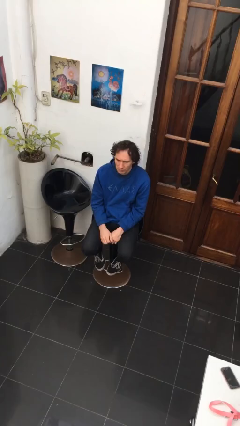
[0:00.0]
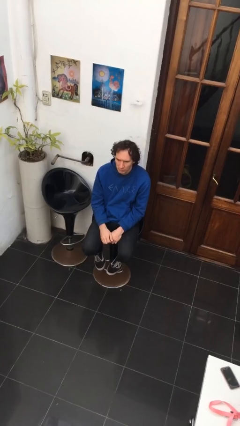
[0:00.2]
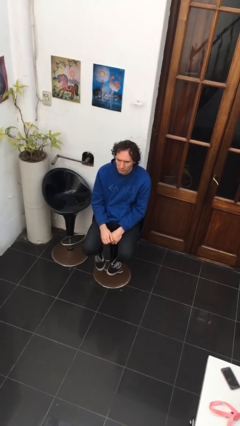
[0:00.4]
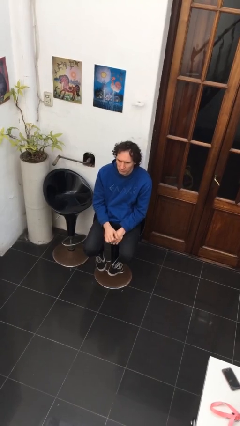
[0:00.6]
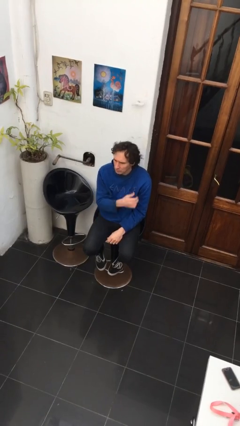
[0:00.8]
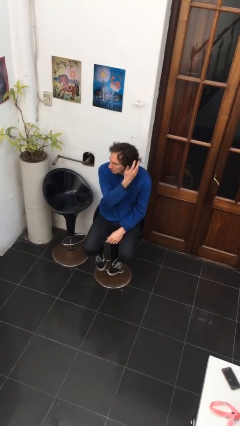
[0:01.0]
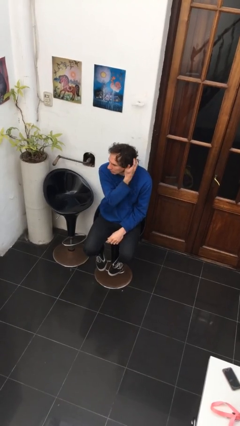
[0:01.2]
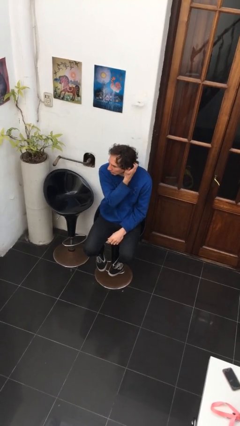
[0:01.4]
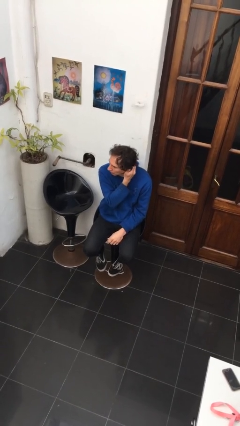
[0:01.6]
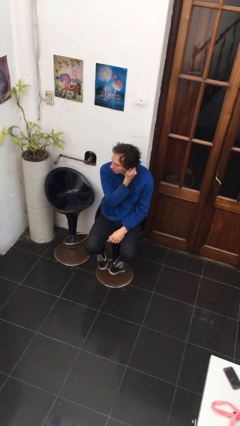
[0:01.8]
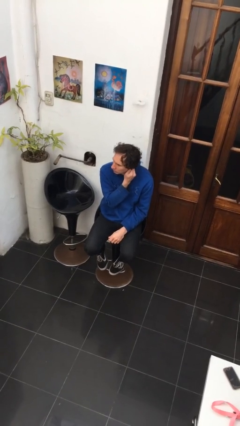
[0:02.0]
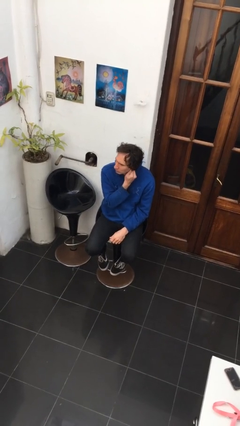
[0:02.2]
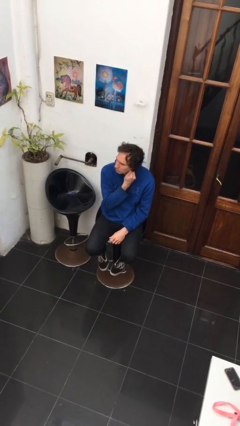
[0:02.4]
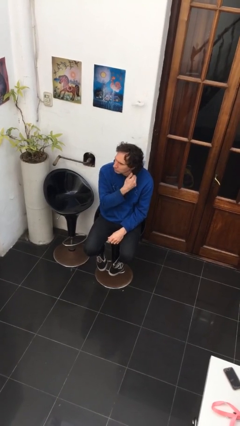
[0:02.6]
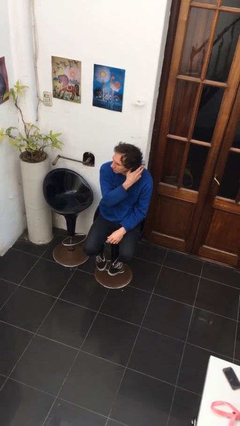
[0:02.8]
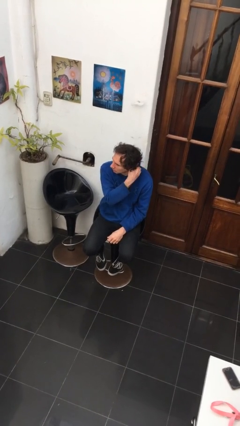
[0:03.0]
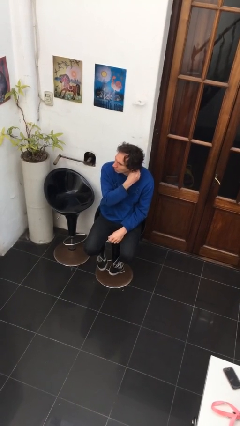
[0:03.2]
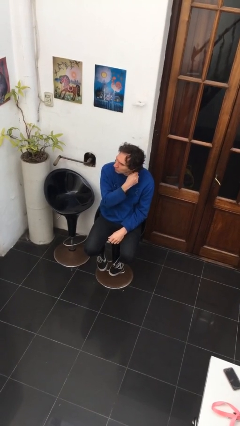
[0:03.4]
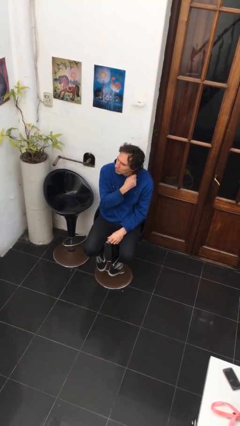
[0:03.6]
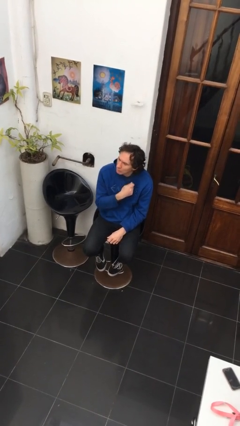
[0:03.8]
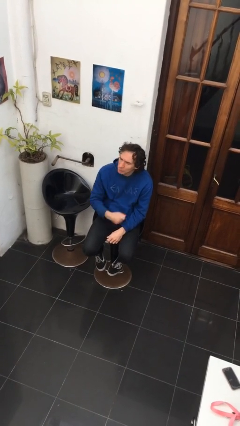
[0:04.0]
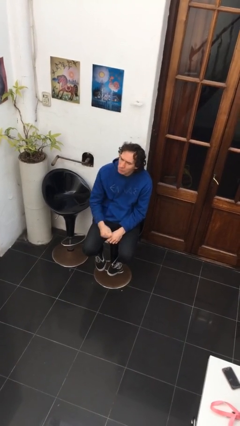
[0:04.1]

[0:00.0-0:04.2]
person strokes hair

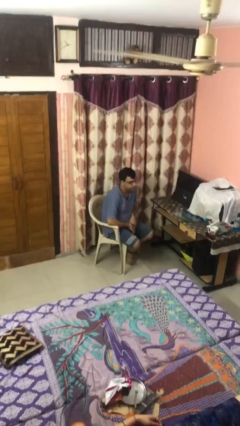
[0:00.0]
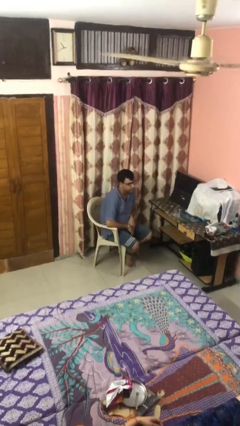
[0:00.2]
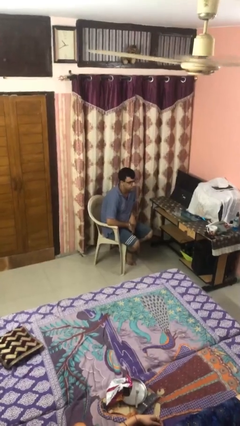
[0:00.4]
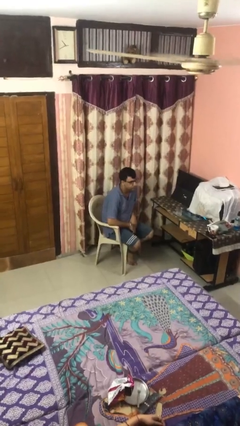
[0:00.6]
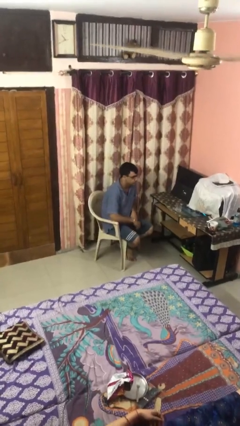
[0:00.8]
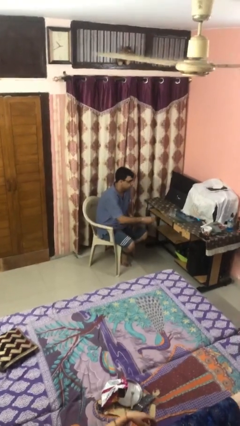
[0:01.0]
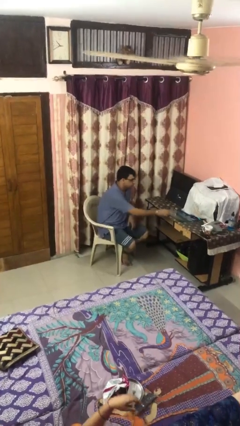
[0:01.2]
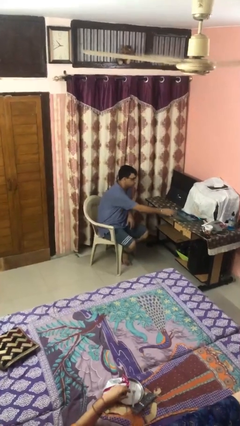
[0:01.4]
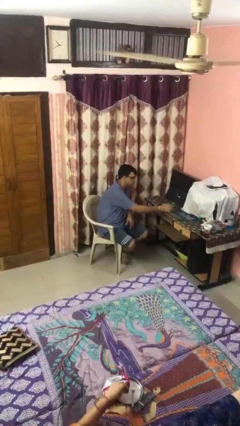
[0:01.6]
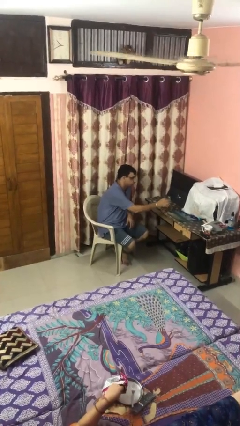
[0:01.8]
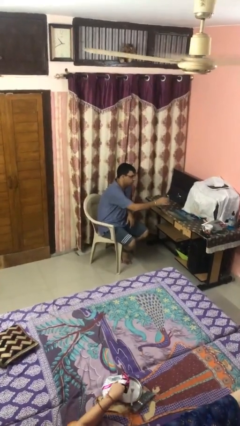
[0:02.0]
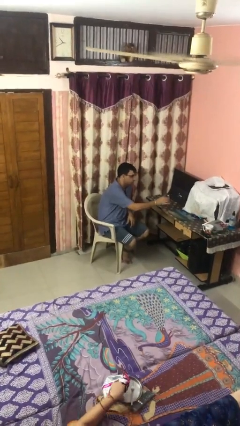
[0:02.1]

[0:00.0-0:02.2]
person picks up object from table

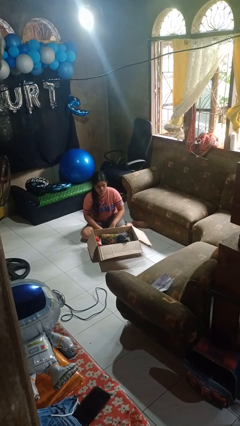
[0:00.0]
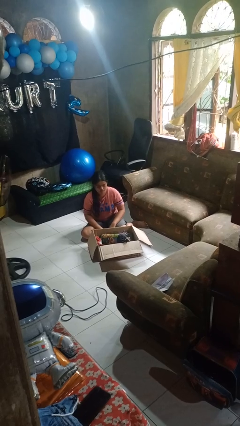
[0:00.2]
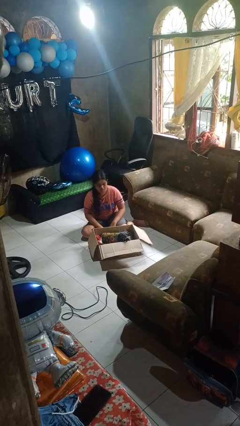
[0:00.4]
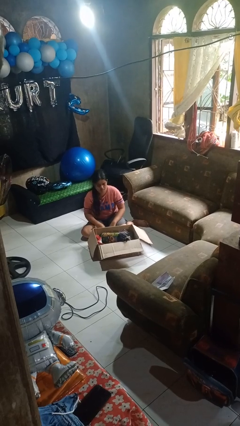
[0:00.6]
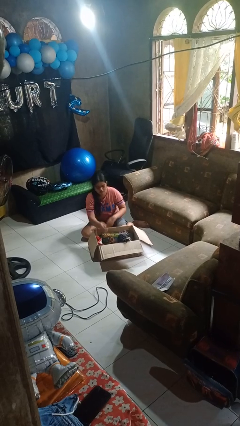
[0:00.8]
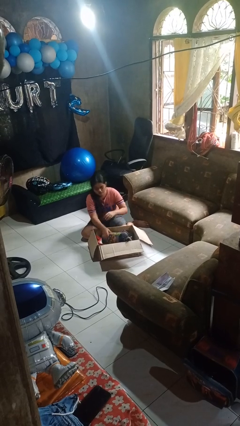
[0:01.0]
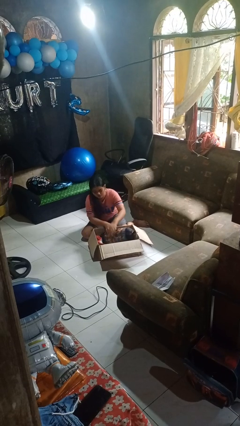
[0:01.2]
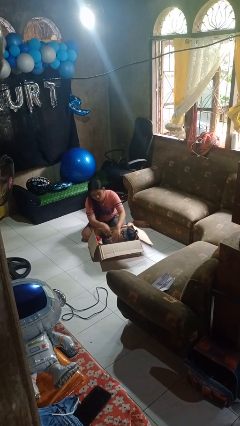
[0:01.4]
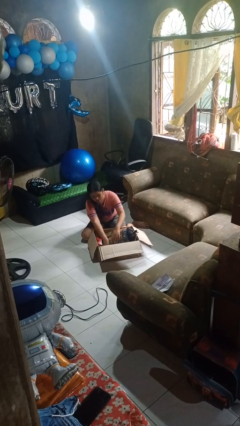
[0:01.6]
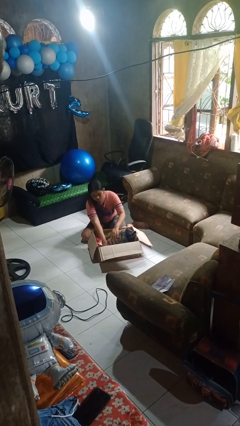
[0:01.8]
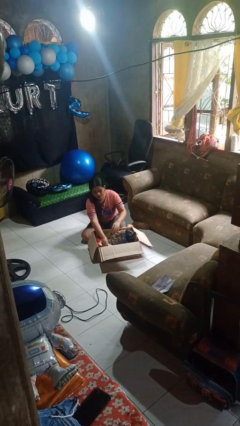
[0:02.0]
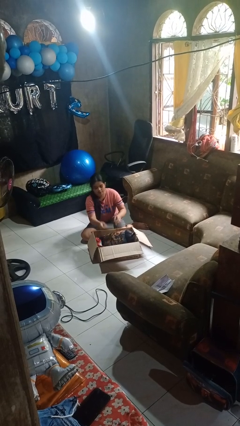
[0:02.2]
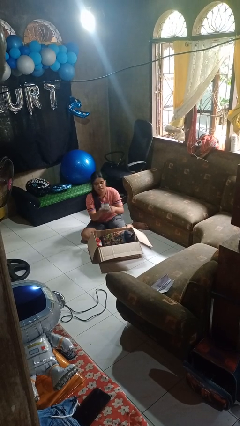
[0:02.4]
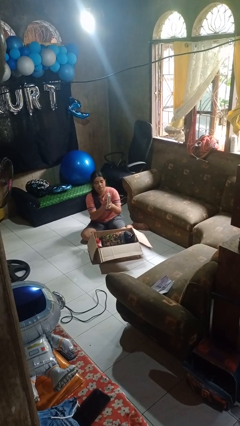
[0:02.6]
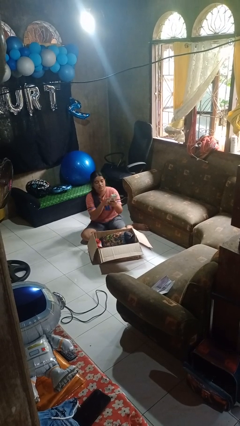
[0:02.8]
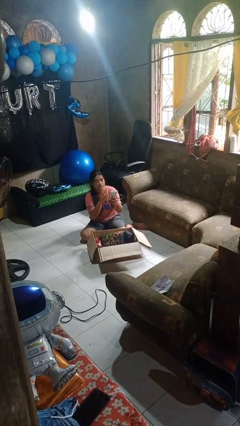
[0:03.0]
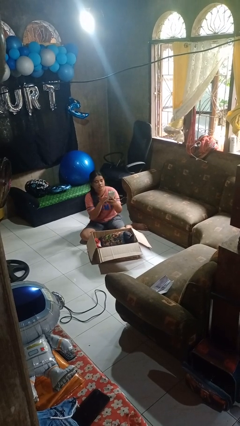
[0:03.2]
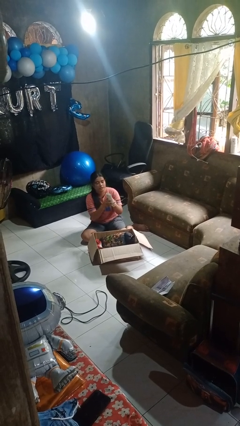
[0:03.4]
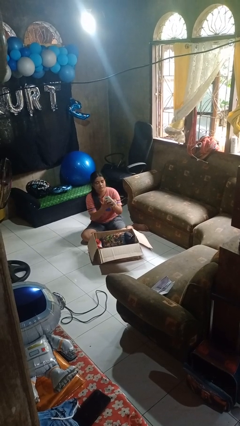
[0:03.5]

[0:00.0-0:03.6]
person takes object from box

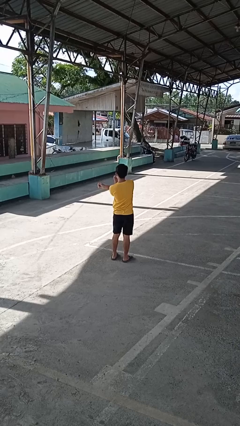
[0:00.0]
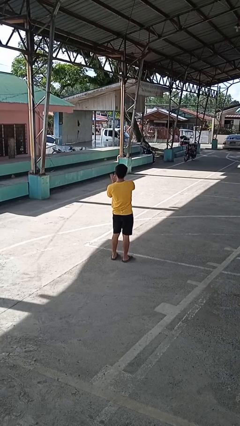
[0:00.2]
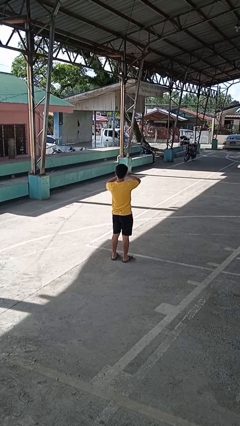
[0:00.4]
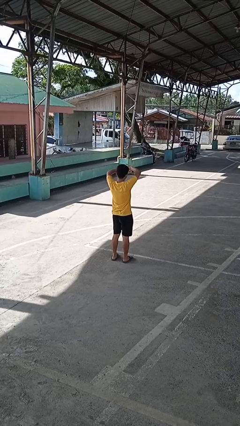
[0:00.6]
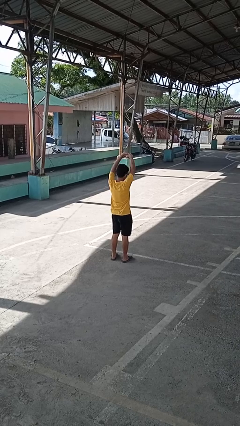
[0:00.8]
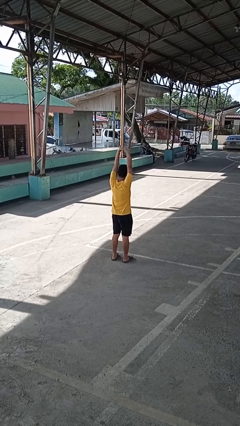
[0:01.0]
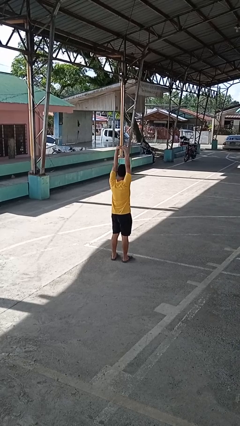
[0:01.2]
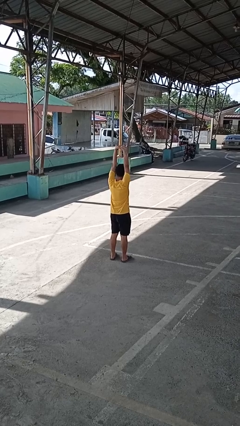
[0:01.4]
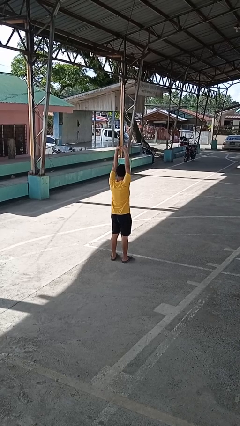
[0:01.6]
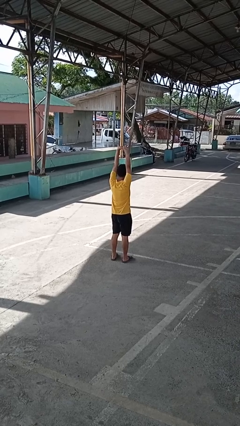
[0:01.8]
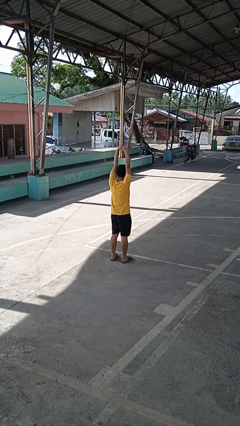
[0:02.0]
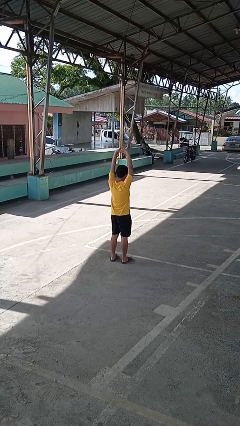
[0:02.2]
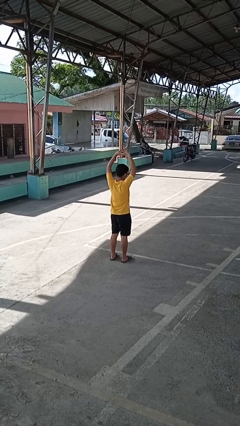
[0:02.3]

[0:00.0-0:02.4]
person stretches arms over head

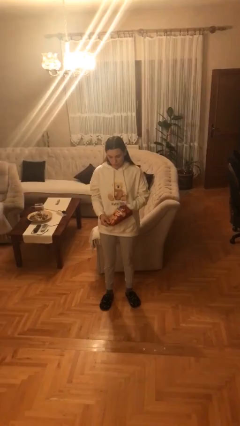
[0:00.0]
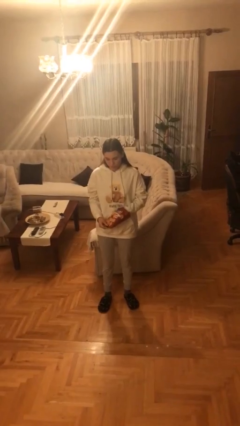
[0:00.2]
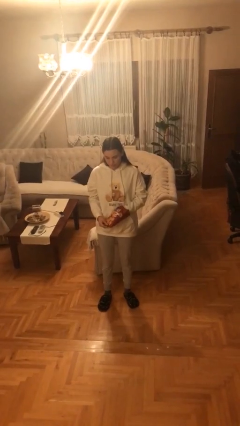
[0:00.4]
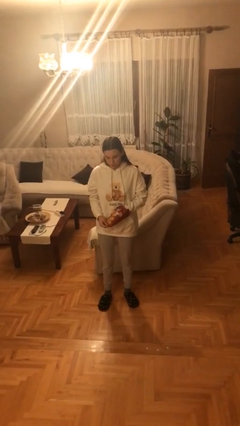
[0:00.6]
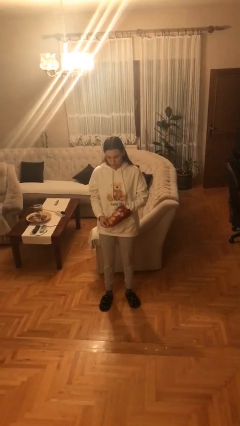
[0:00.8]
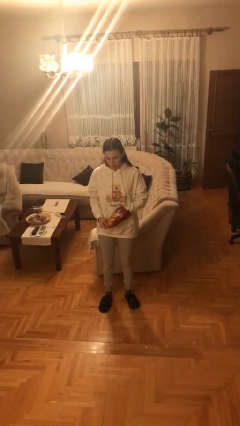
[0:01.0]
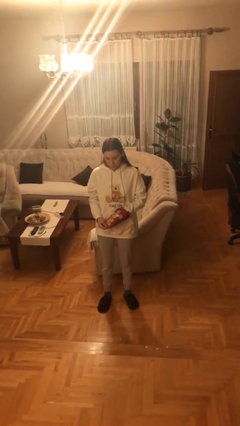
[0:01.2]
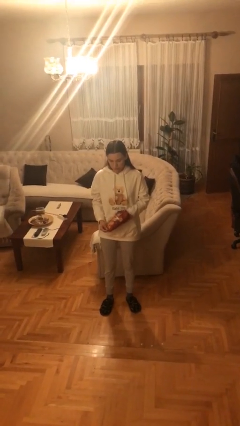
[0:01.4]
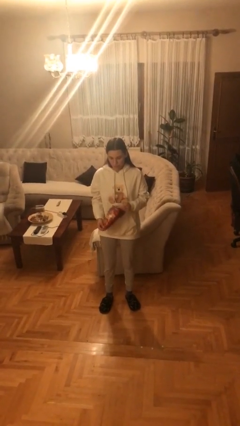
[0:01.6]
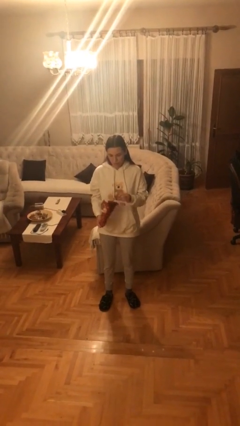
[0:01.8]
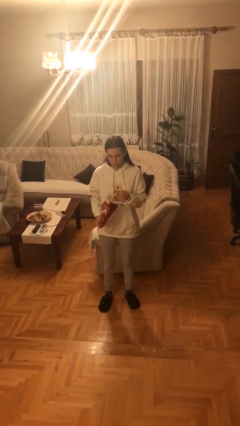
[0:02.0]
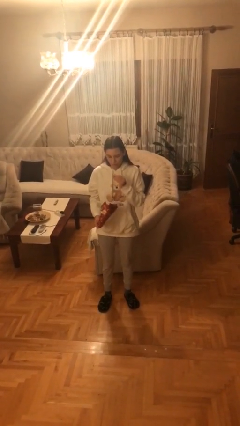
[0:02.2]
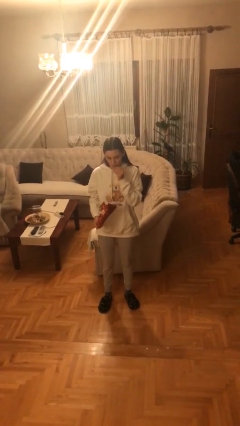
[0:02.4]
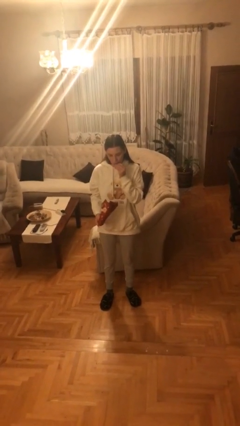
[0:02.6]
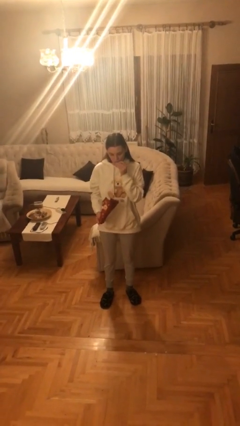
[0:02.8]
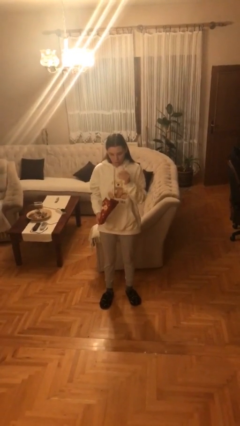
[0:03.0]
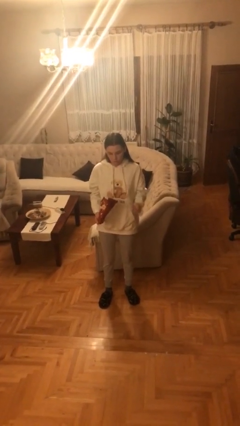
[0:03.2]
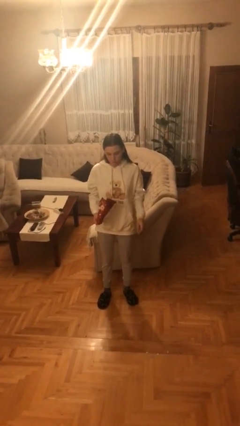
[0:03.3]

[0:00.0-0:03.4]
person eats snack from bag

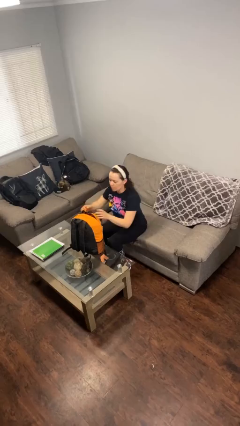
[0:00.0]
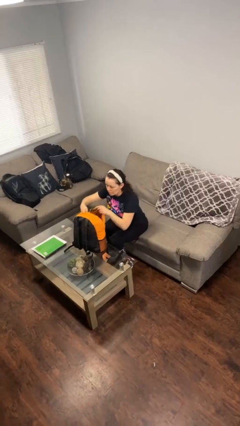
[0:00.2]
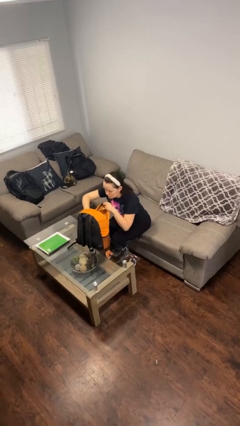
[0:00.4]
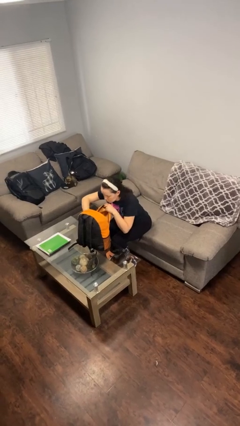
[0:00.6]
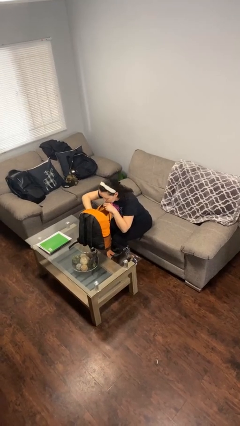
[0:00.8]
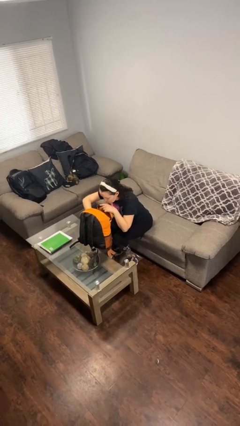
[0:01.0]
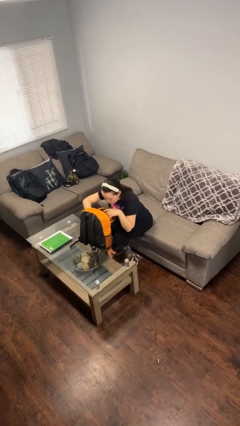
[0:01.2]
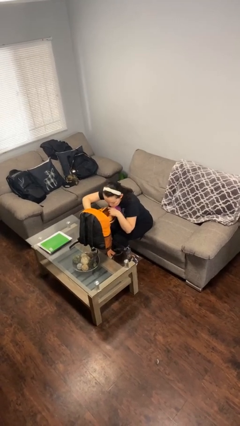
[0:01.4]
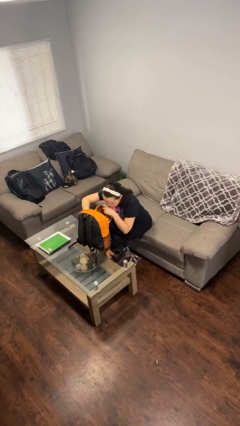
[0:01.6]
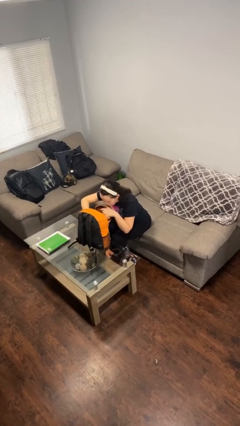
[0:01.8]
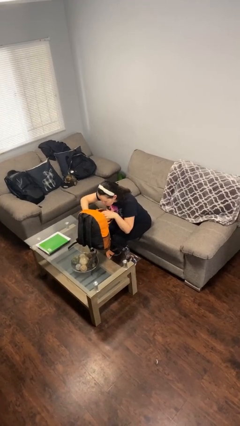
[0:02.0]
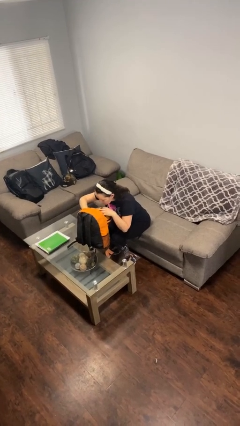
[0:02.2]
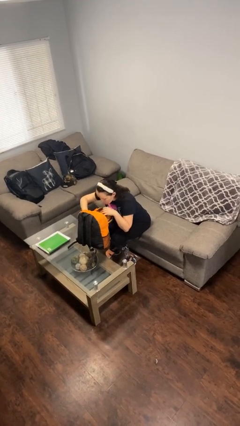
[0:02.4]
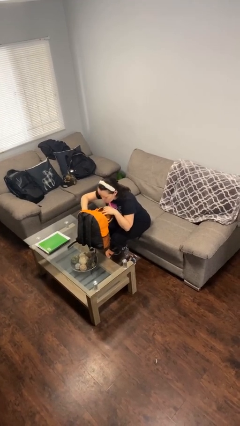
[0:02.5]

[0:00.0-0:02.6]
person searches in backpack
